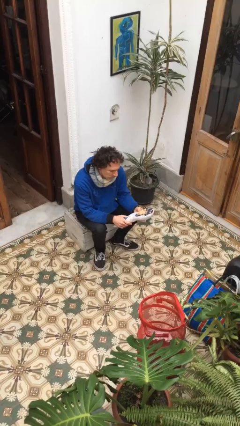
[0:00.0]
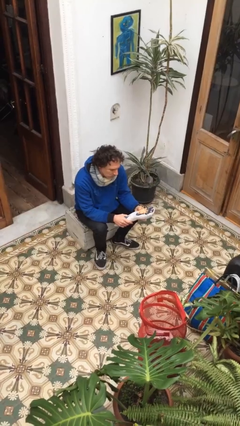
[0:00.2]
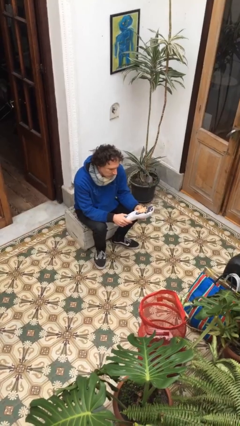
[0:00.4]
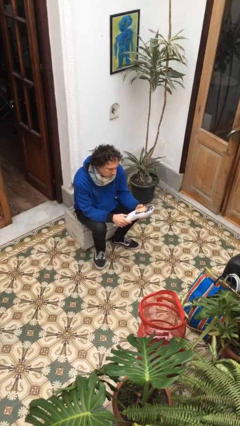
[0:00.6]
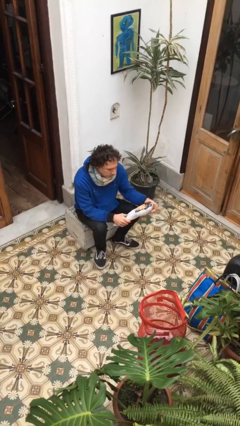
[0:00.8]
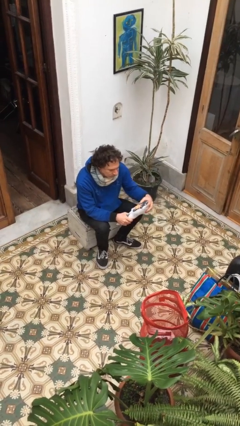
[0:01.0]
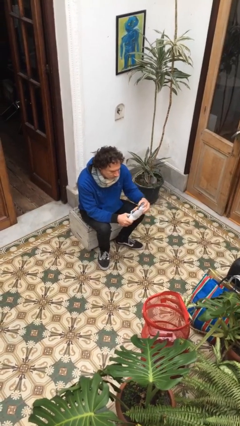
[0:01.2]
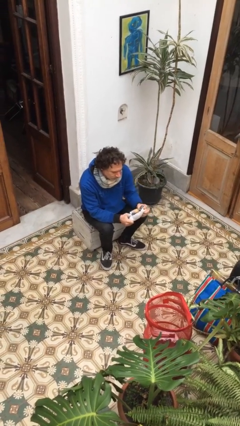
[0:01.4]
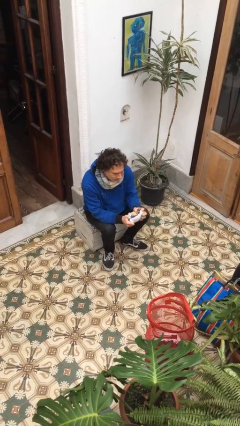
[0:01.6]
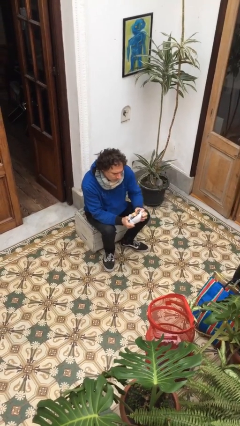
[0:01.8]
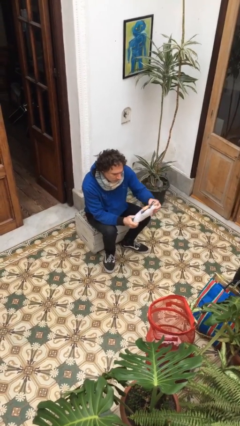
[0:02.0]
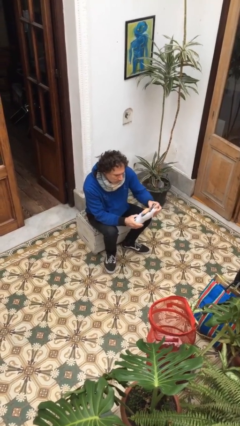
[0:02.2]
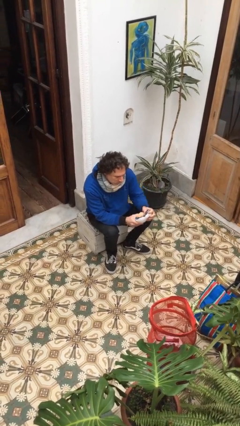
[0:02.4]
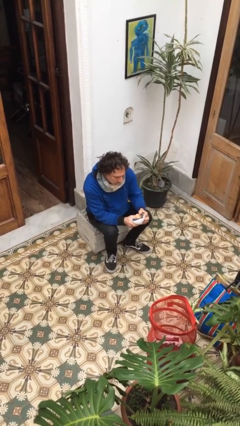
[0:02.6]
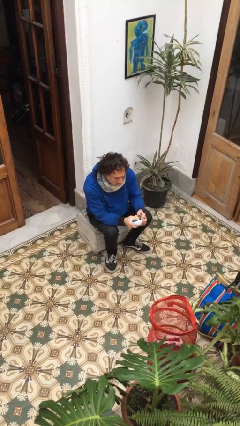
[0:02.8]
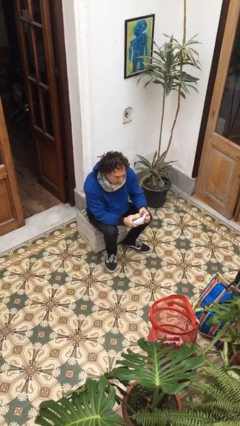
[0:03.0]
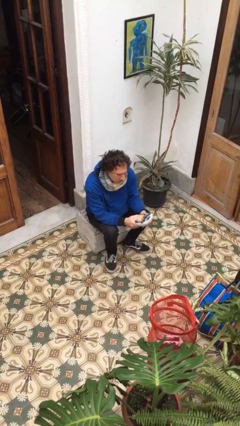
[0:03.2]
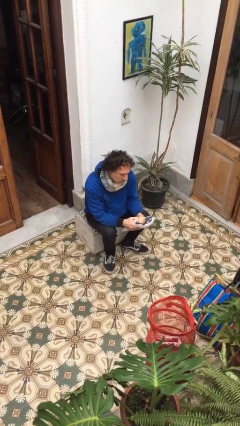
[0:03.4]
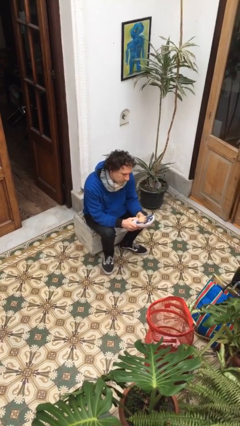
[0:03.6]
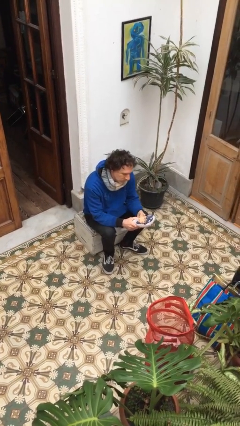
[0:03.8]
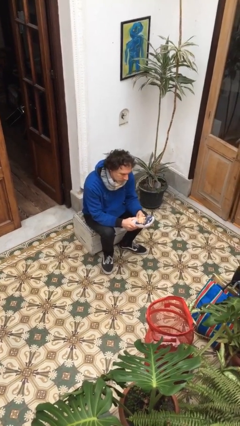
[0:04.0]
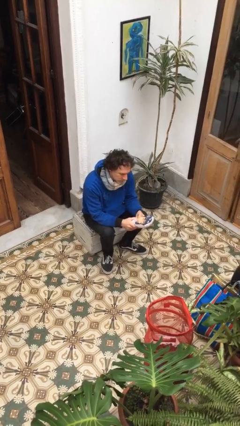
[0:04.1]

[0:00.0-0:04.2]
person squeezes object

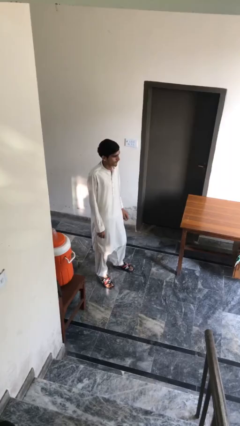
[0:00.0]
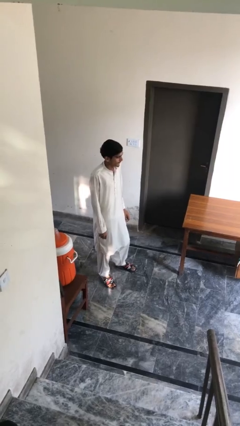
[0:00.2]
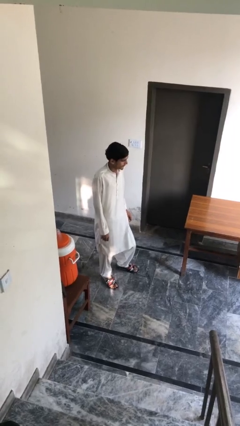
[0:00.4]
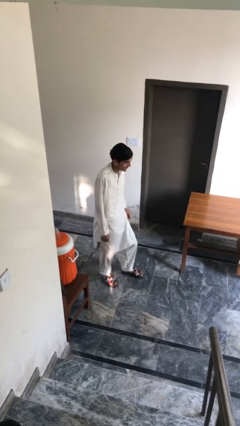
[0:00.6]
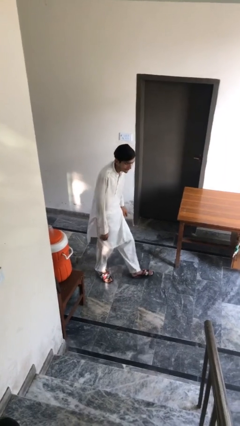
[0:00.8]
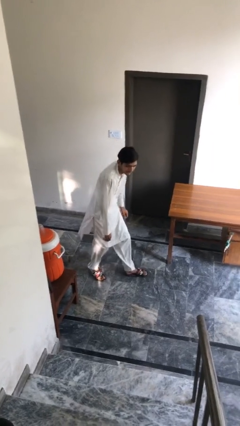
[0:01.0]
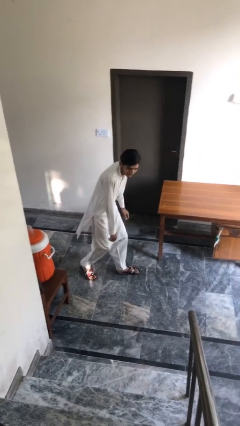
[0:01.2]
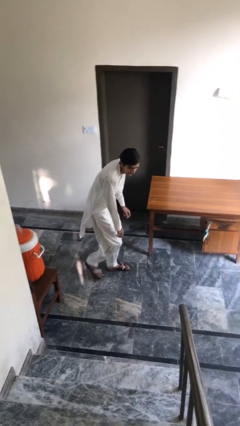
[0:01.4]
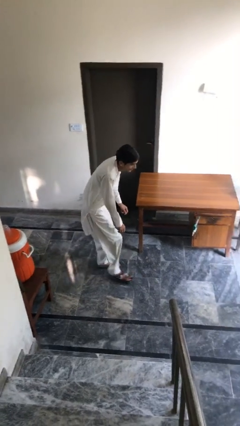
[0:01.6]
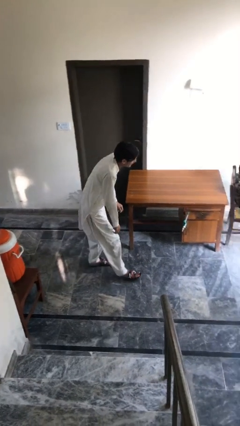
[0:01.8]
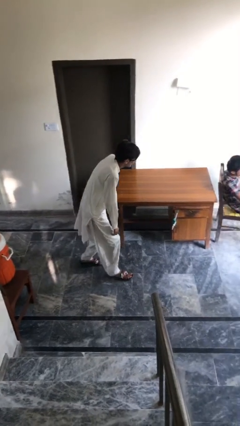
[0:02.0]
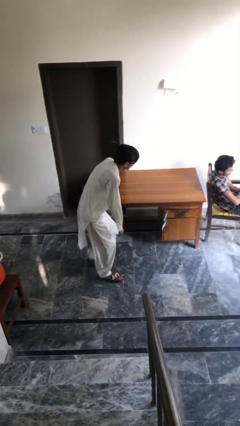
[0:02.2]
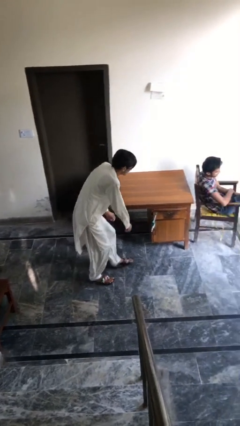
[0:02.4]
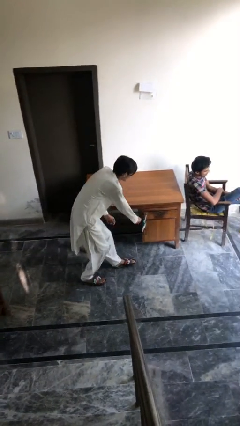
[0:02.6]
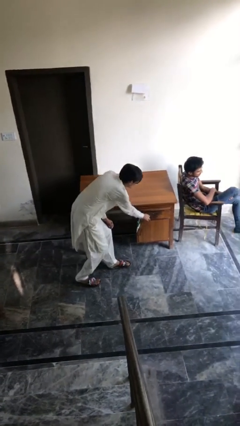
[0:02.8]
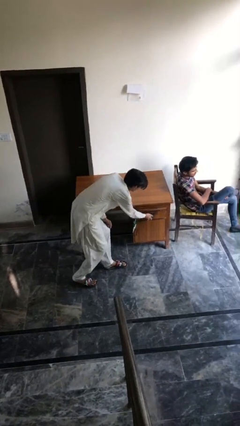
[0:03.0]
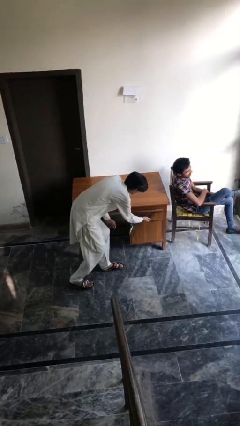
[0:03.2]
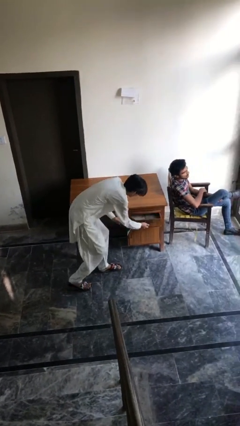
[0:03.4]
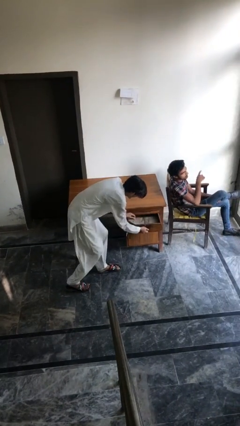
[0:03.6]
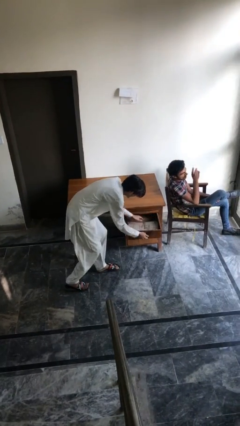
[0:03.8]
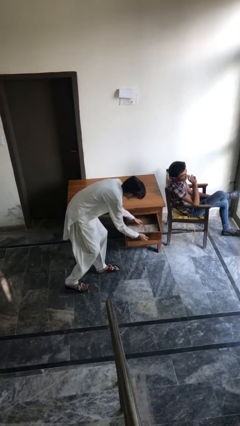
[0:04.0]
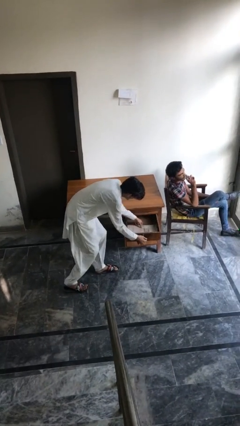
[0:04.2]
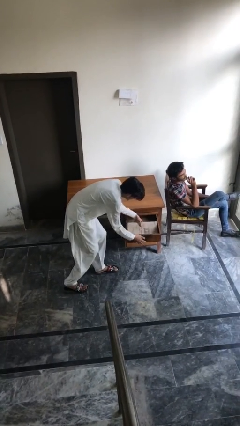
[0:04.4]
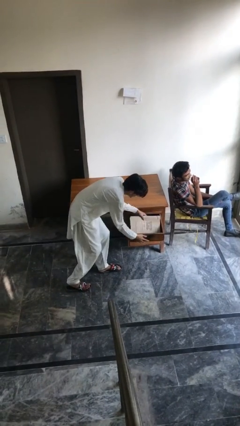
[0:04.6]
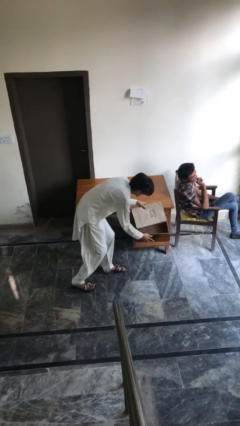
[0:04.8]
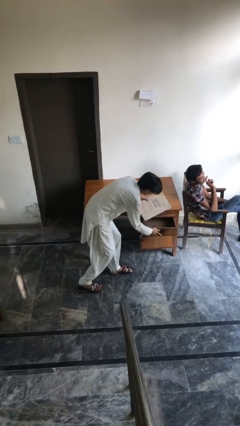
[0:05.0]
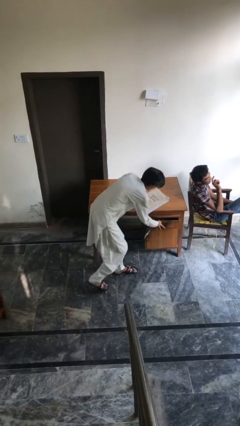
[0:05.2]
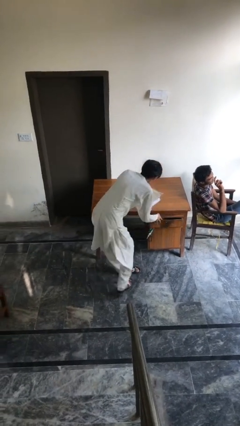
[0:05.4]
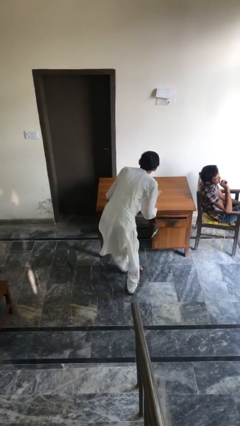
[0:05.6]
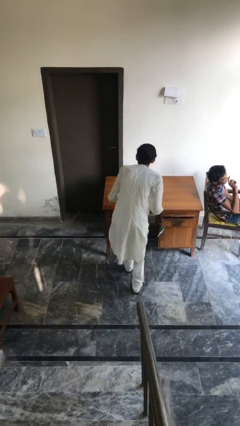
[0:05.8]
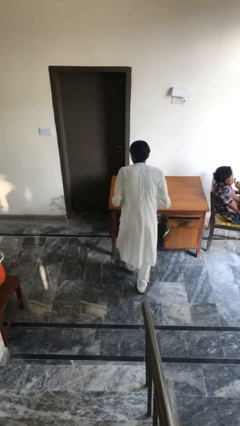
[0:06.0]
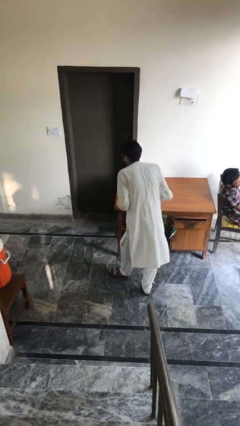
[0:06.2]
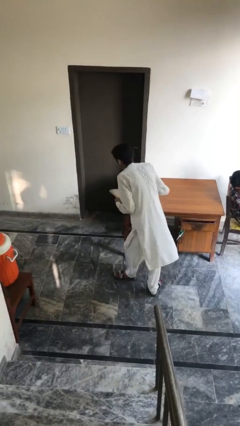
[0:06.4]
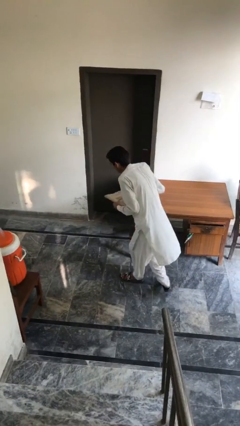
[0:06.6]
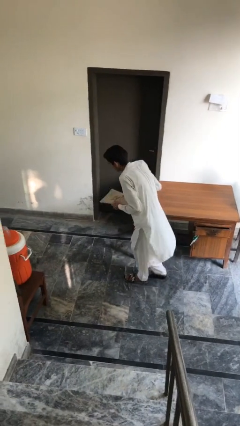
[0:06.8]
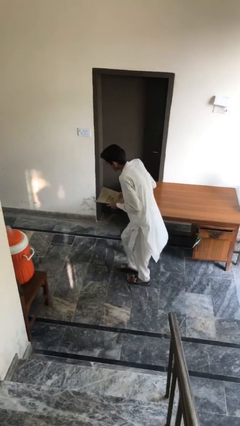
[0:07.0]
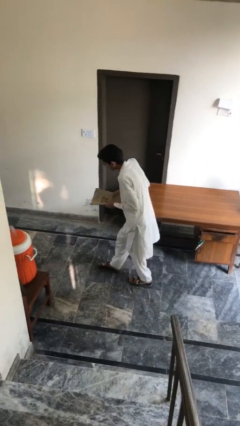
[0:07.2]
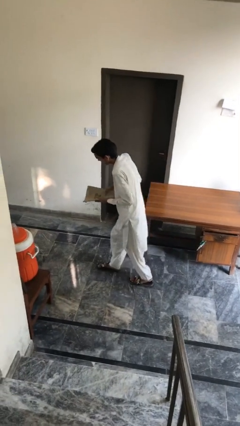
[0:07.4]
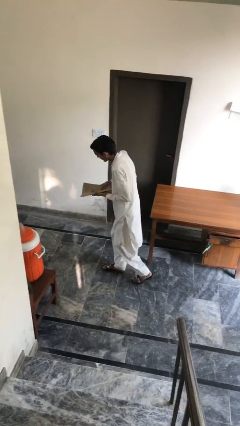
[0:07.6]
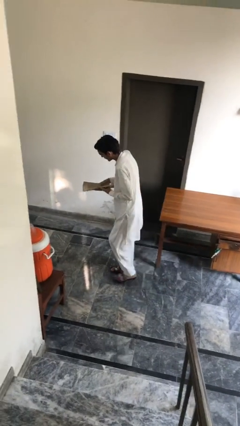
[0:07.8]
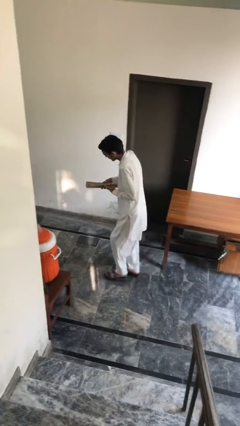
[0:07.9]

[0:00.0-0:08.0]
person steals object from person

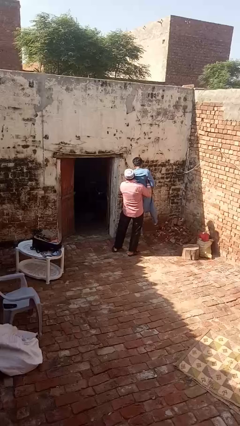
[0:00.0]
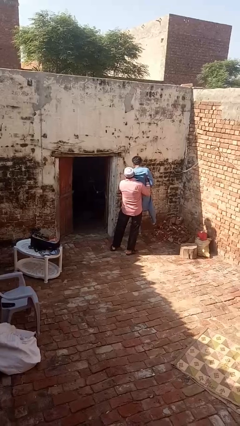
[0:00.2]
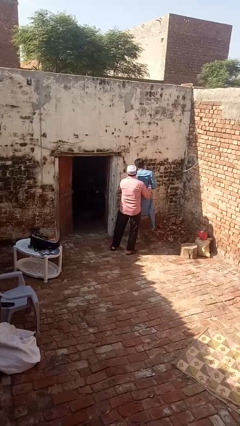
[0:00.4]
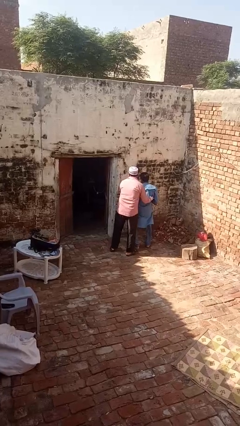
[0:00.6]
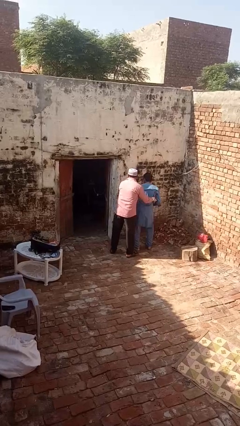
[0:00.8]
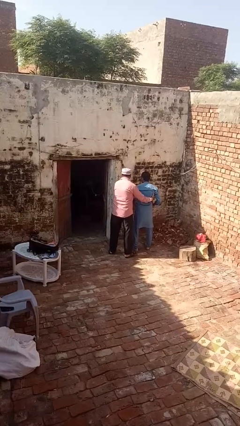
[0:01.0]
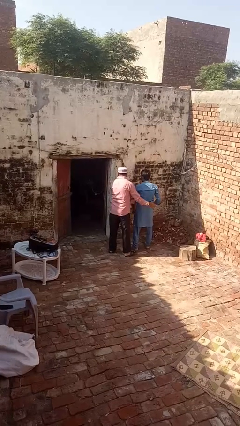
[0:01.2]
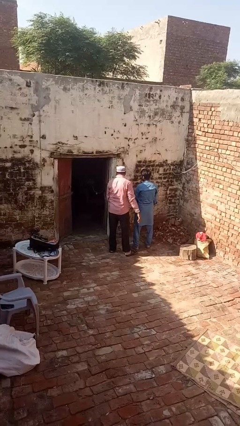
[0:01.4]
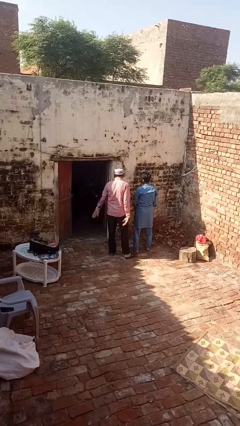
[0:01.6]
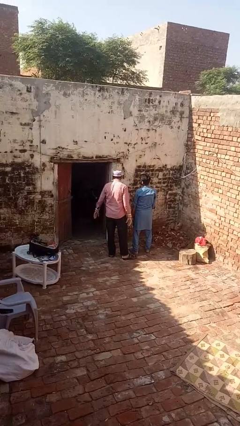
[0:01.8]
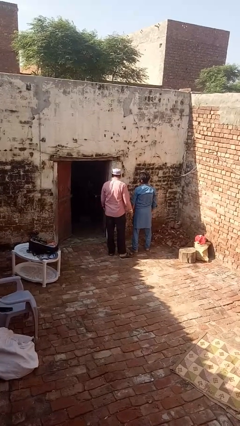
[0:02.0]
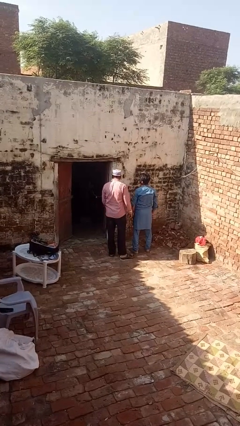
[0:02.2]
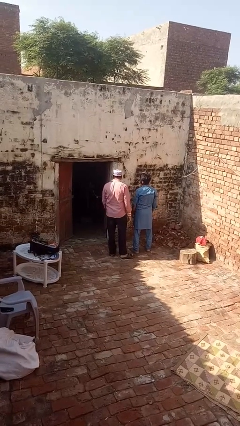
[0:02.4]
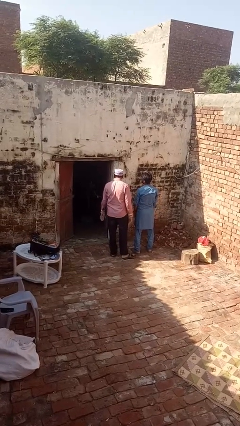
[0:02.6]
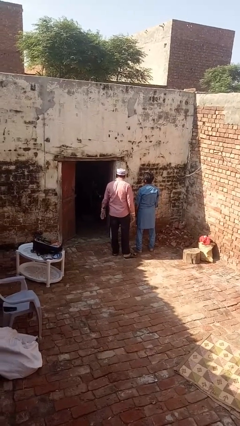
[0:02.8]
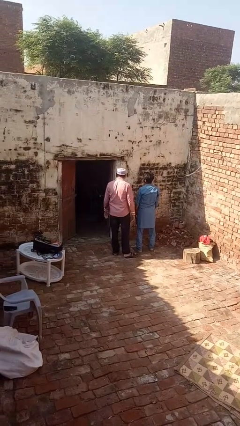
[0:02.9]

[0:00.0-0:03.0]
person puts down person

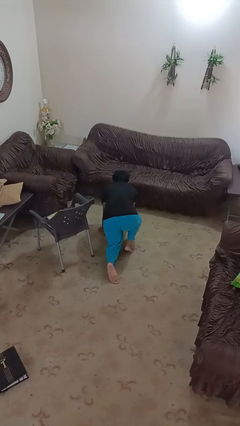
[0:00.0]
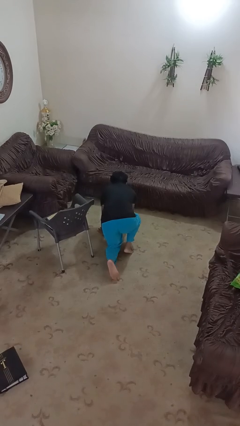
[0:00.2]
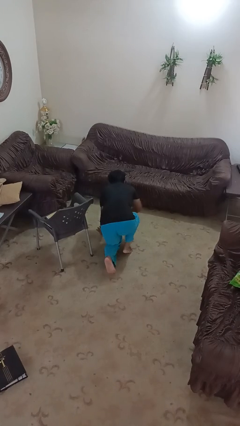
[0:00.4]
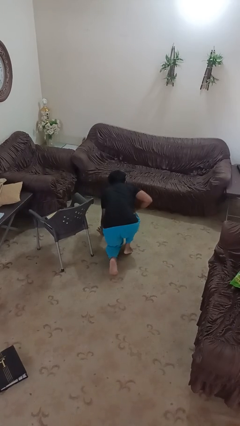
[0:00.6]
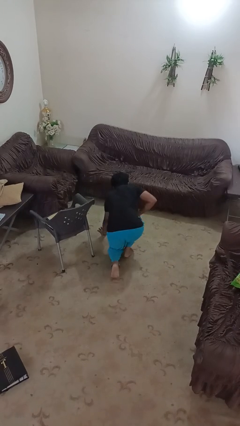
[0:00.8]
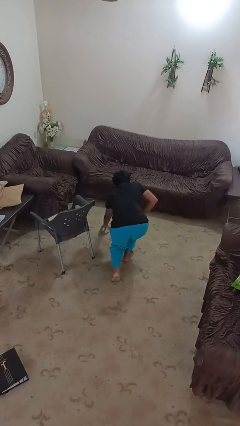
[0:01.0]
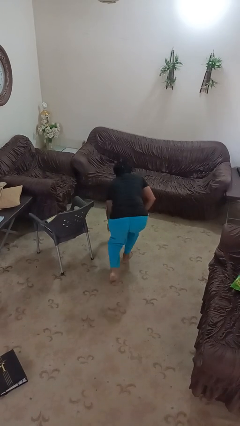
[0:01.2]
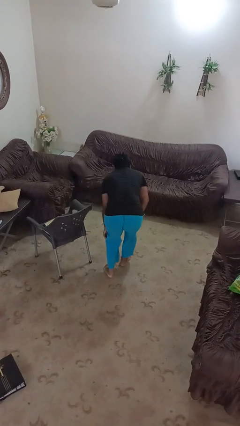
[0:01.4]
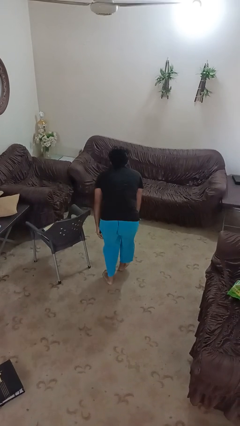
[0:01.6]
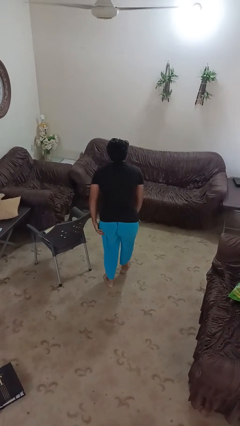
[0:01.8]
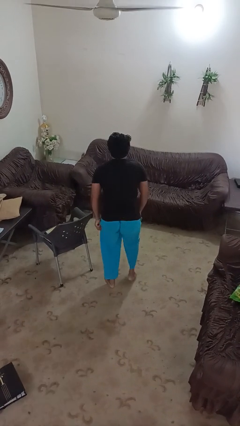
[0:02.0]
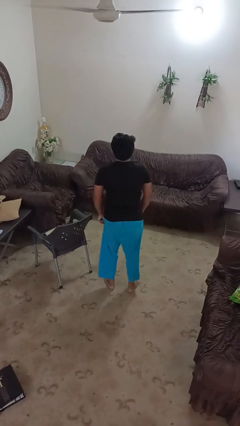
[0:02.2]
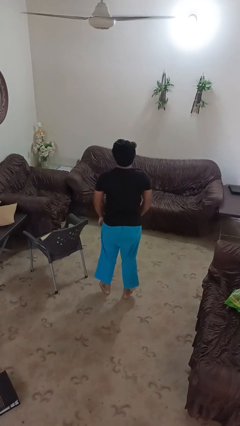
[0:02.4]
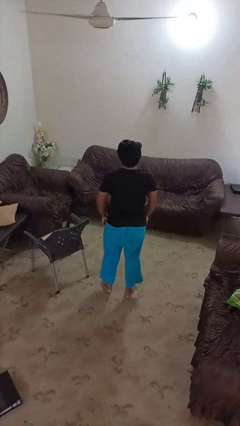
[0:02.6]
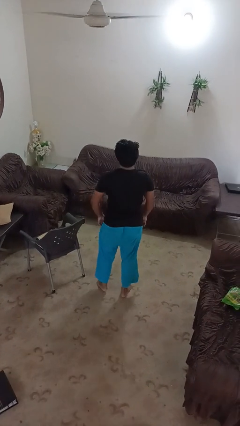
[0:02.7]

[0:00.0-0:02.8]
person stands up from floor
